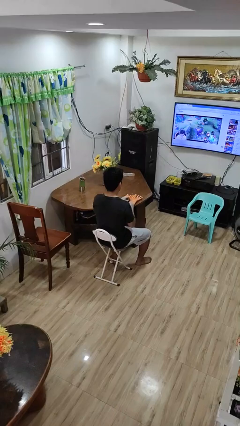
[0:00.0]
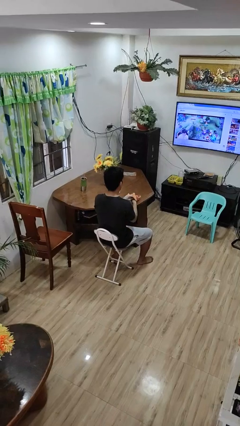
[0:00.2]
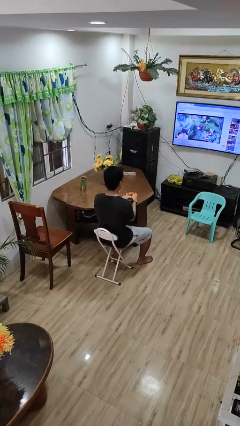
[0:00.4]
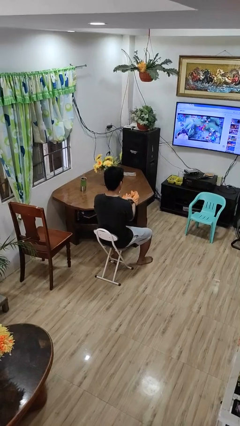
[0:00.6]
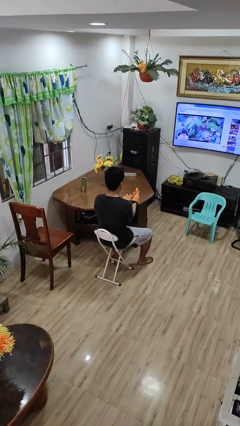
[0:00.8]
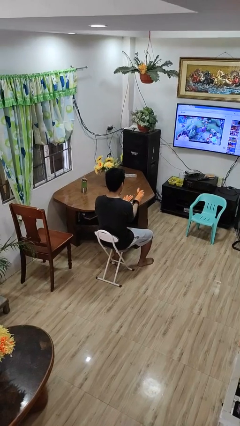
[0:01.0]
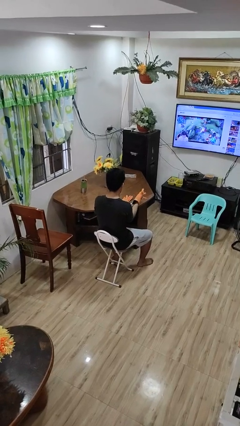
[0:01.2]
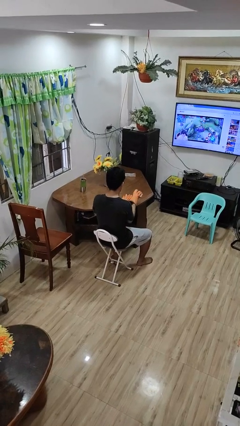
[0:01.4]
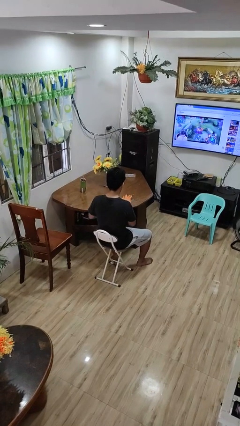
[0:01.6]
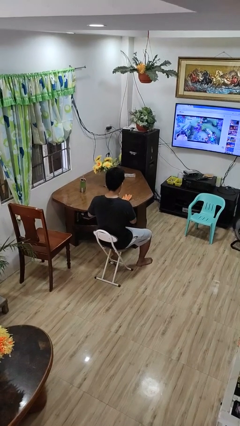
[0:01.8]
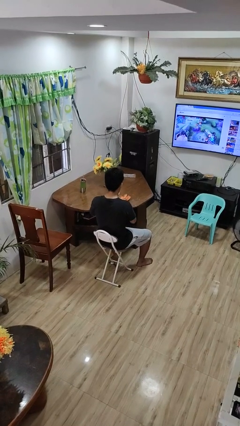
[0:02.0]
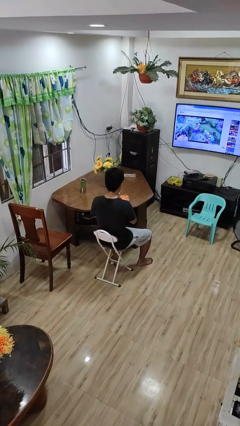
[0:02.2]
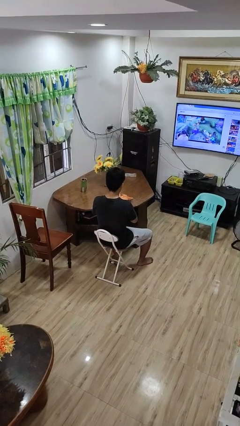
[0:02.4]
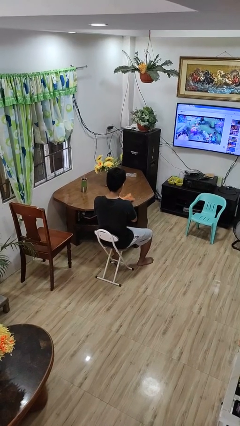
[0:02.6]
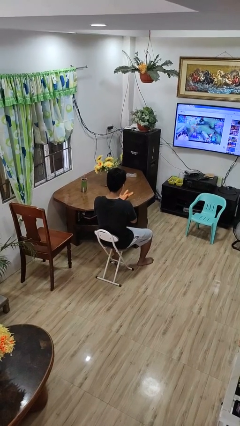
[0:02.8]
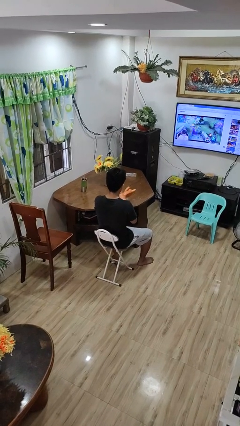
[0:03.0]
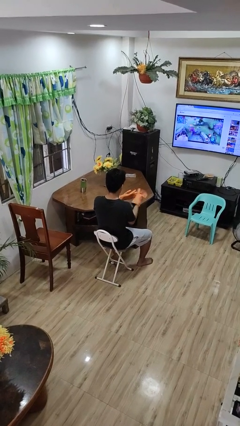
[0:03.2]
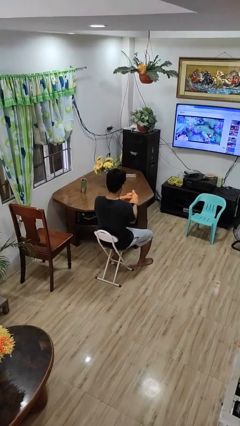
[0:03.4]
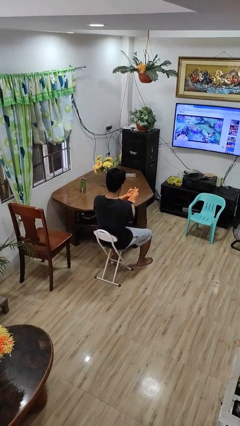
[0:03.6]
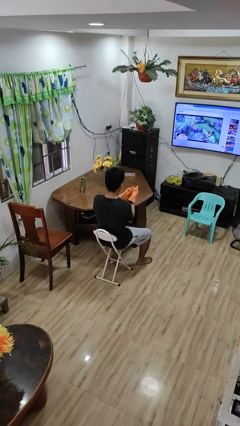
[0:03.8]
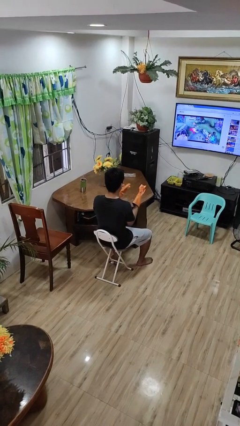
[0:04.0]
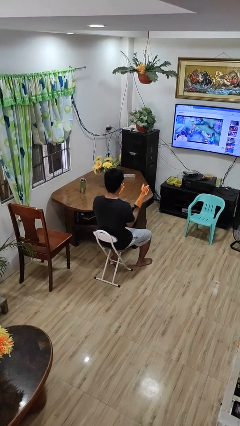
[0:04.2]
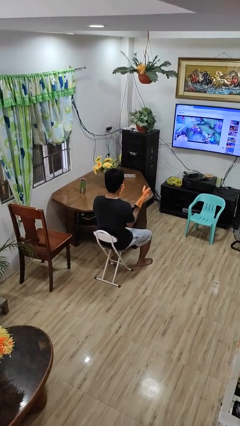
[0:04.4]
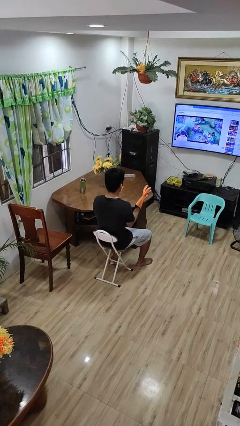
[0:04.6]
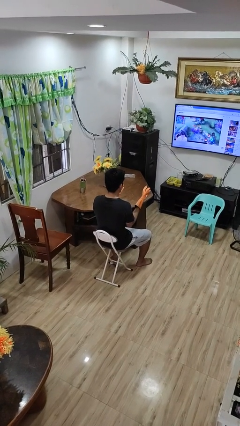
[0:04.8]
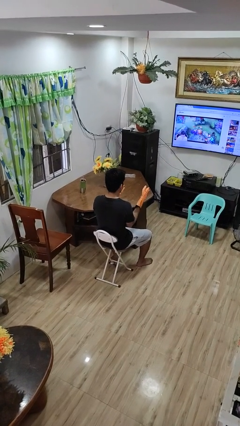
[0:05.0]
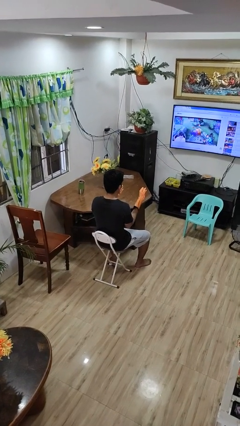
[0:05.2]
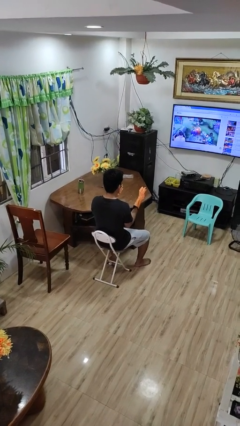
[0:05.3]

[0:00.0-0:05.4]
person puts on gloves

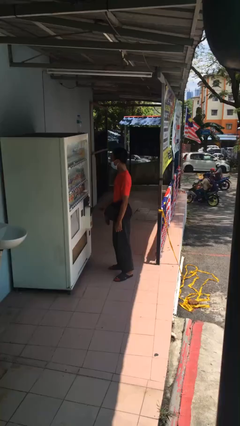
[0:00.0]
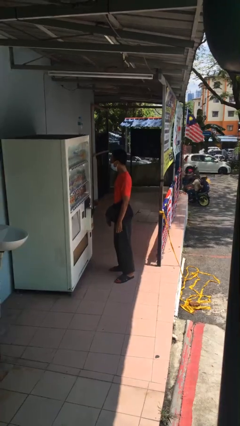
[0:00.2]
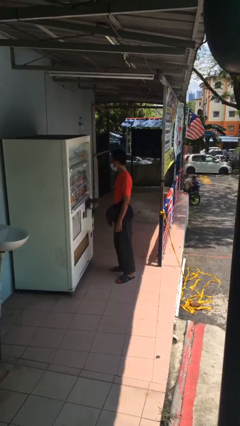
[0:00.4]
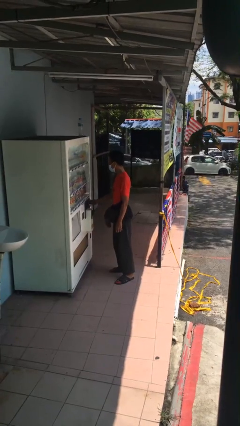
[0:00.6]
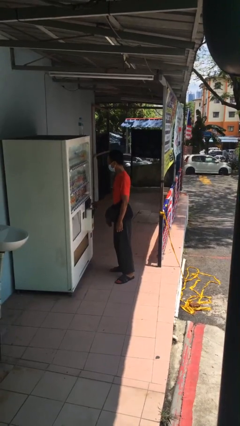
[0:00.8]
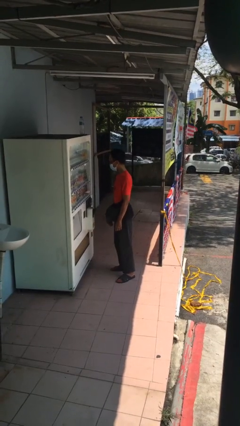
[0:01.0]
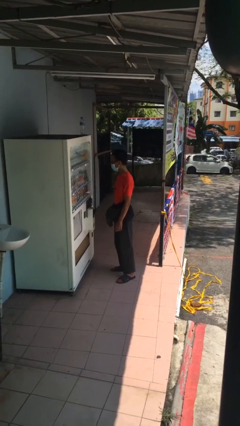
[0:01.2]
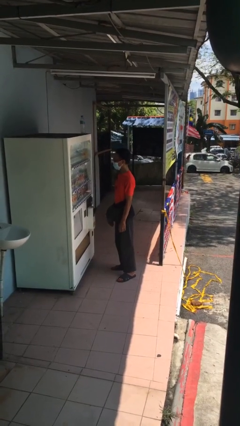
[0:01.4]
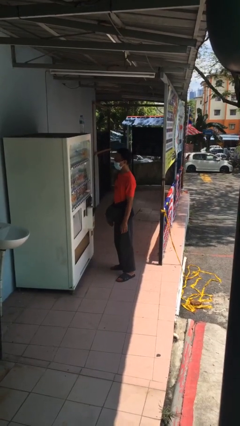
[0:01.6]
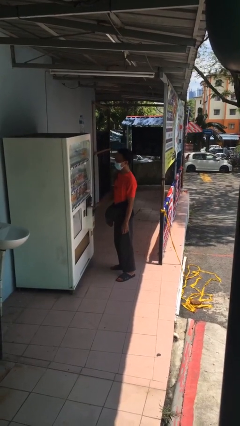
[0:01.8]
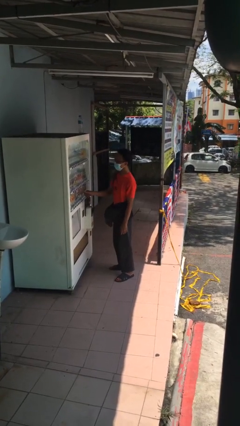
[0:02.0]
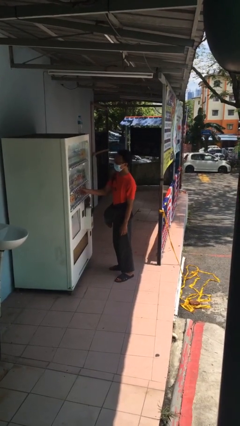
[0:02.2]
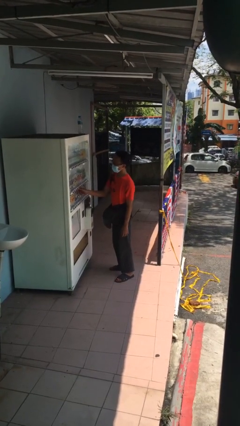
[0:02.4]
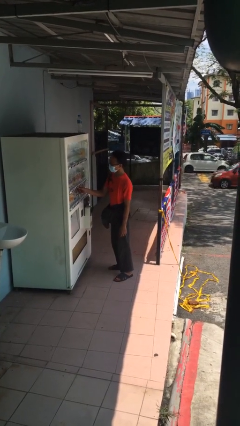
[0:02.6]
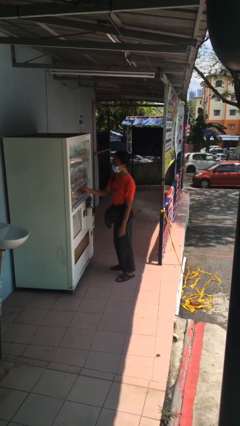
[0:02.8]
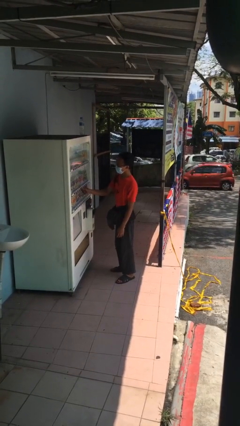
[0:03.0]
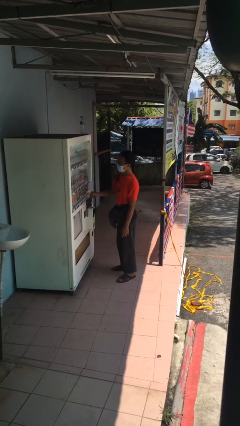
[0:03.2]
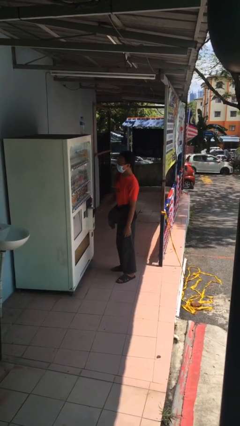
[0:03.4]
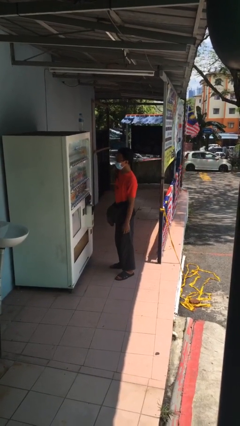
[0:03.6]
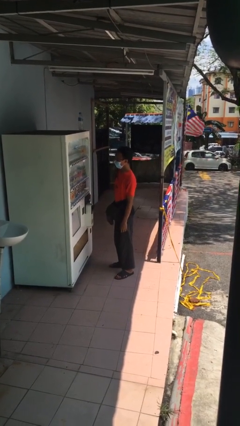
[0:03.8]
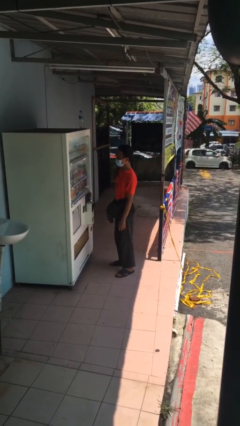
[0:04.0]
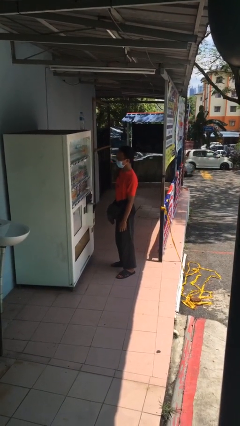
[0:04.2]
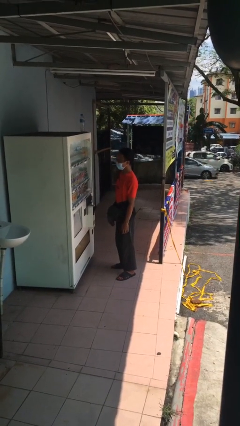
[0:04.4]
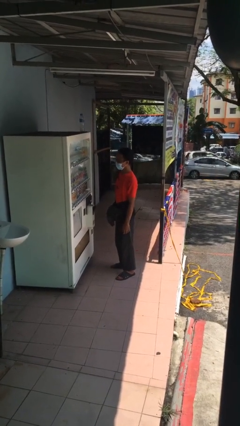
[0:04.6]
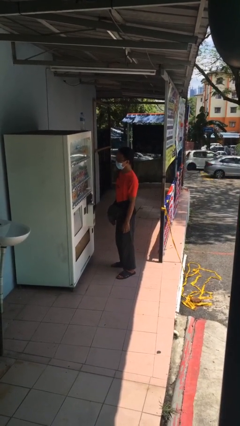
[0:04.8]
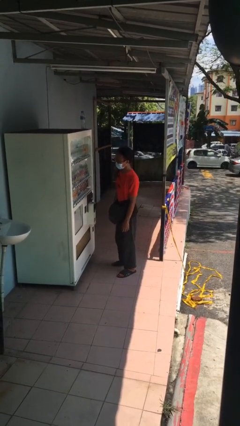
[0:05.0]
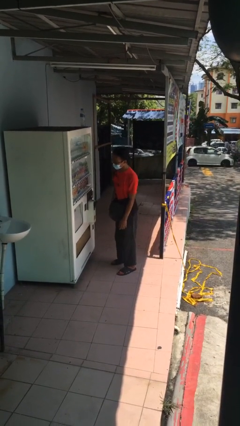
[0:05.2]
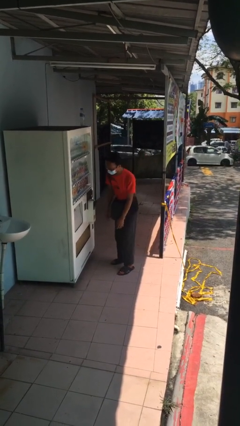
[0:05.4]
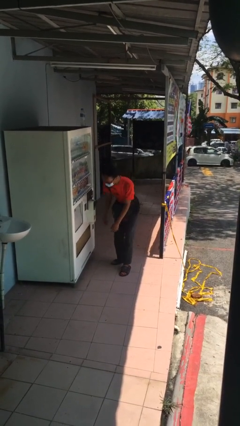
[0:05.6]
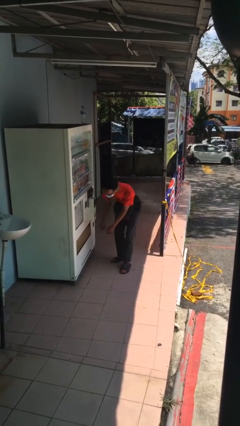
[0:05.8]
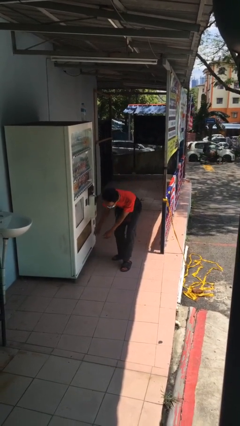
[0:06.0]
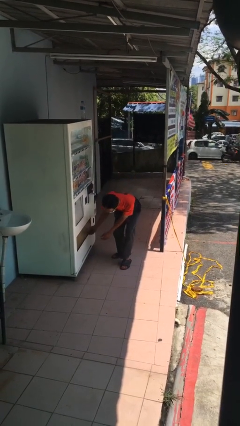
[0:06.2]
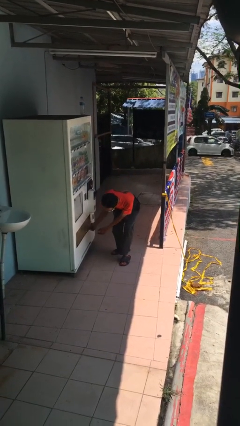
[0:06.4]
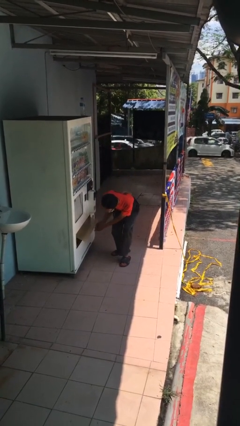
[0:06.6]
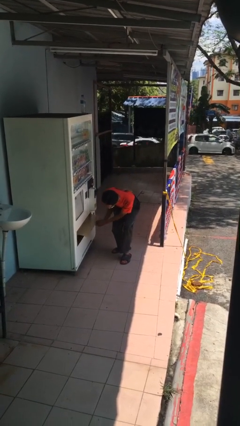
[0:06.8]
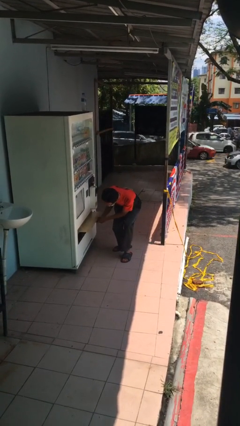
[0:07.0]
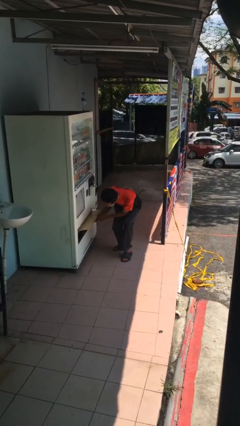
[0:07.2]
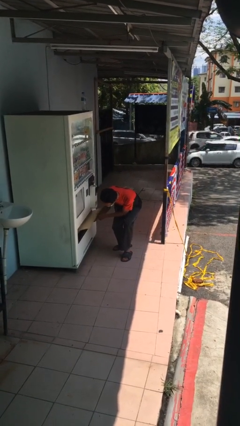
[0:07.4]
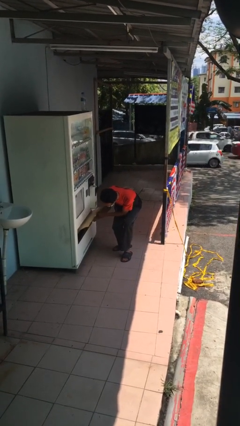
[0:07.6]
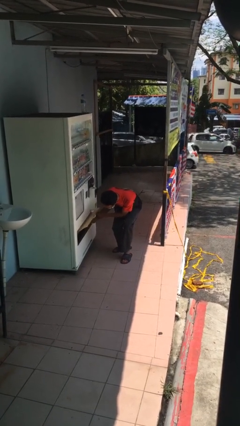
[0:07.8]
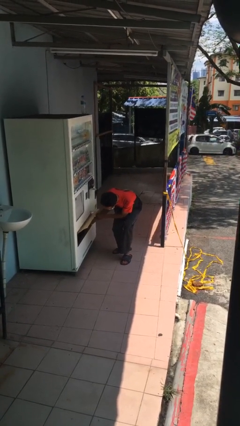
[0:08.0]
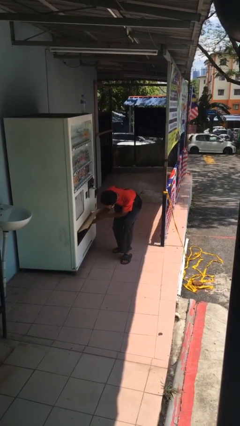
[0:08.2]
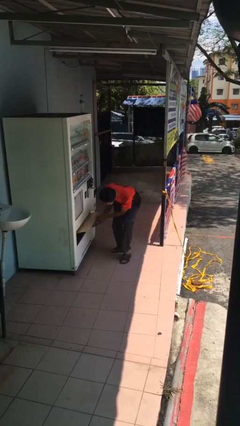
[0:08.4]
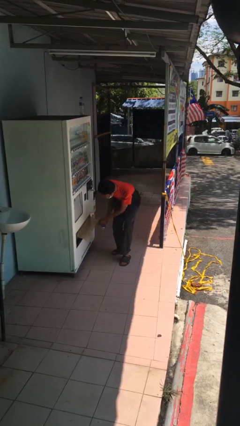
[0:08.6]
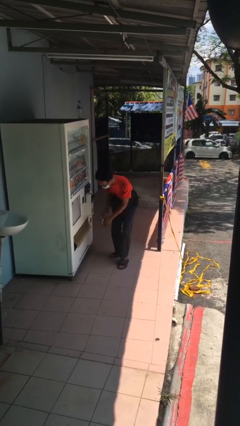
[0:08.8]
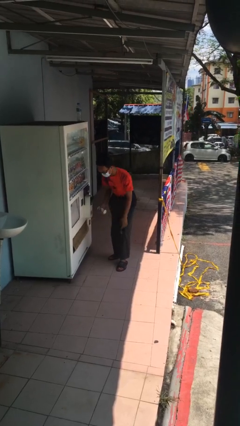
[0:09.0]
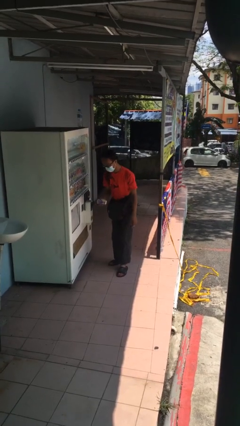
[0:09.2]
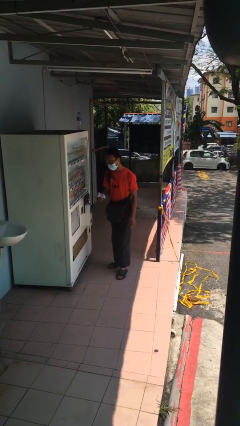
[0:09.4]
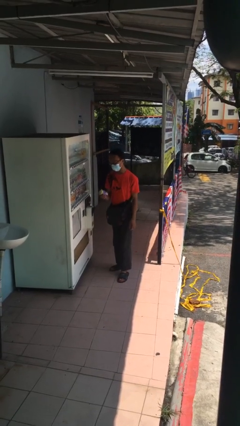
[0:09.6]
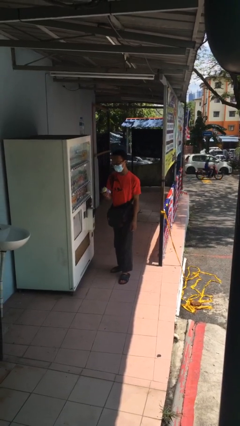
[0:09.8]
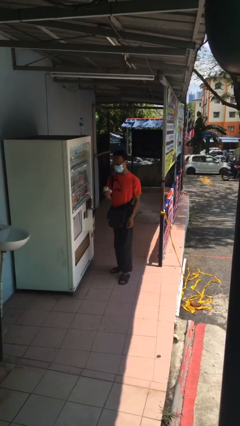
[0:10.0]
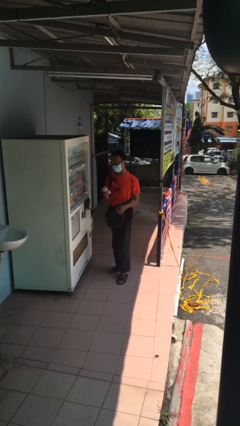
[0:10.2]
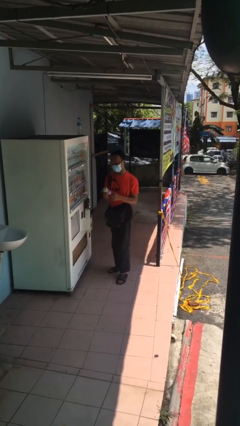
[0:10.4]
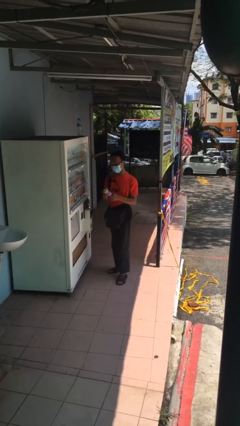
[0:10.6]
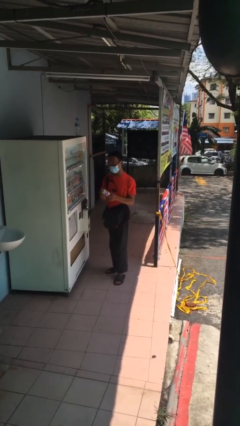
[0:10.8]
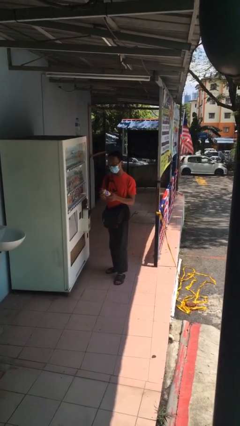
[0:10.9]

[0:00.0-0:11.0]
person purchases from machine

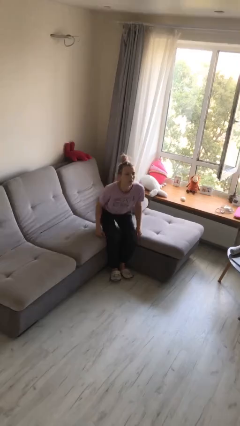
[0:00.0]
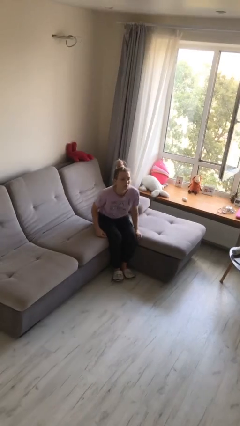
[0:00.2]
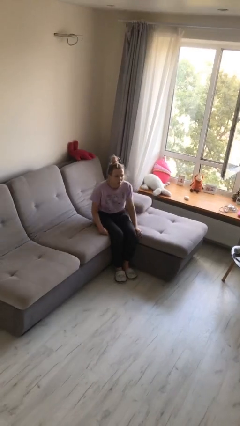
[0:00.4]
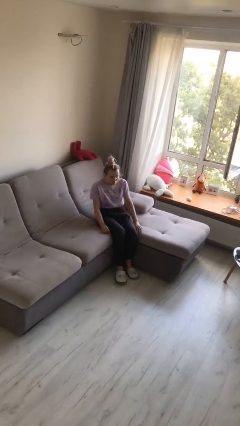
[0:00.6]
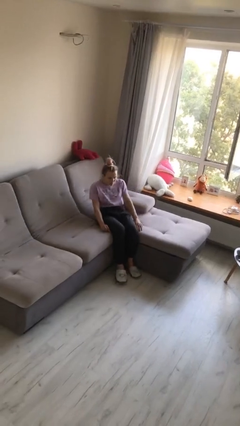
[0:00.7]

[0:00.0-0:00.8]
person lies down on couch

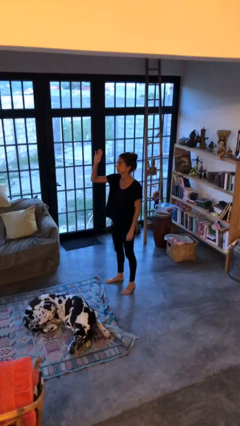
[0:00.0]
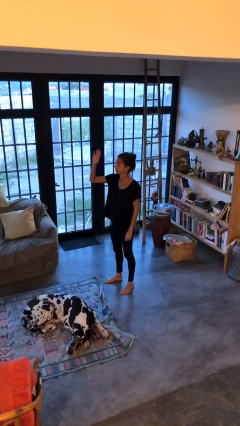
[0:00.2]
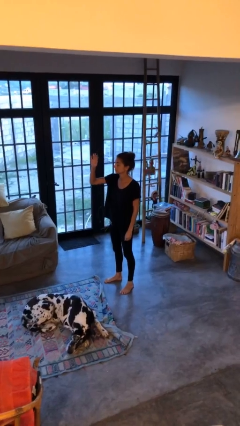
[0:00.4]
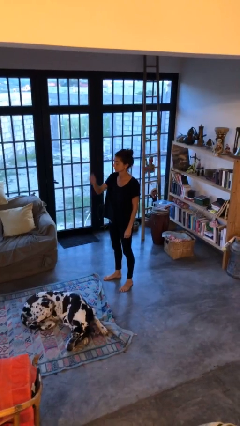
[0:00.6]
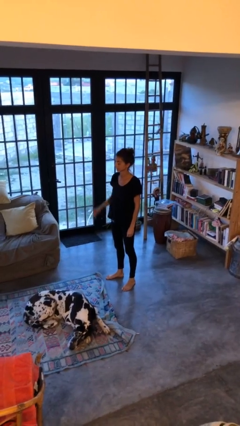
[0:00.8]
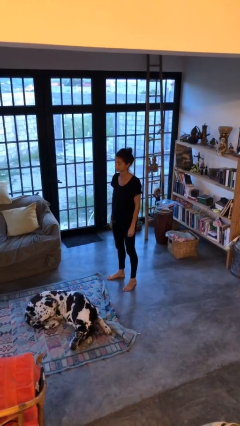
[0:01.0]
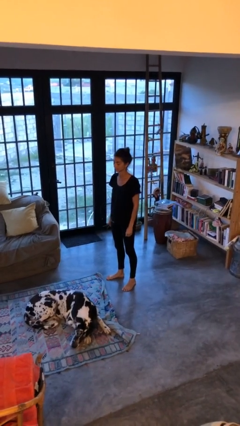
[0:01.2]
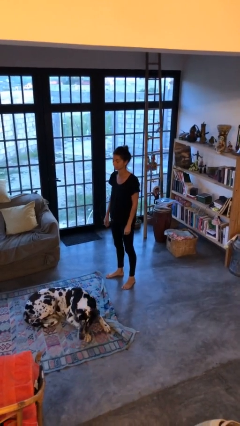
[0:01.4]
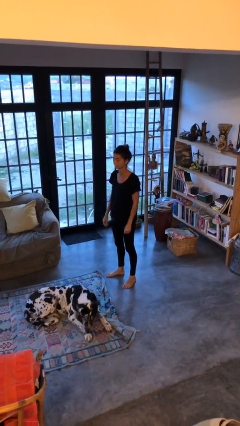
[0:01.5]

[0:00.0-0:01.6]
person gestures lower hand
